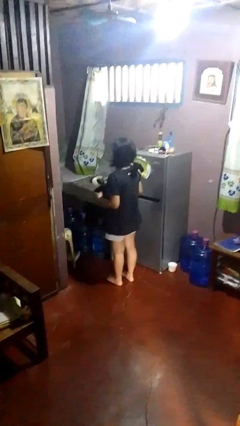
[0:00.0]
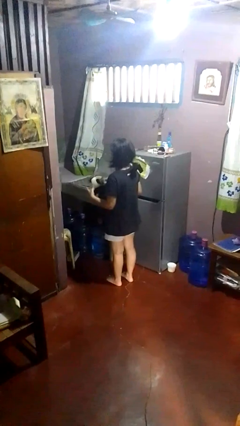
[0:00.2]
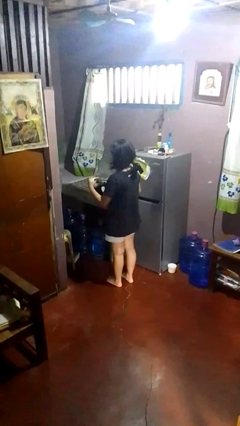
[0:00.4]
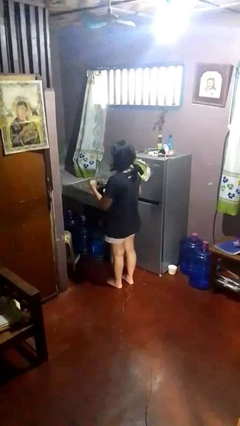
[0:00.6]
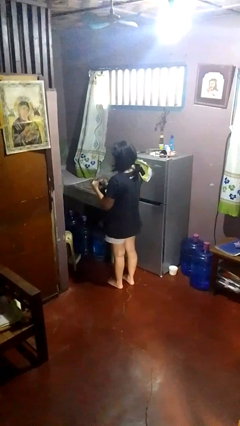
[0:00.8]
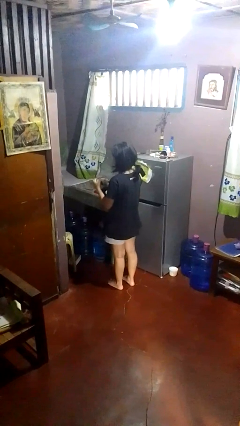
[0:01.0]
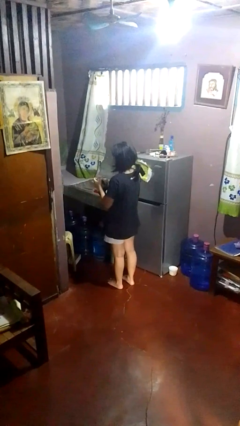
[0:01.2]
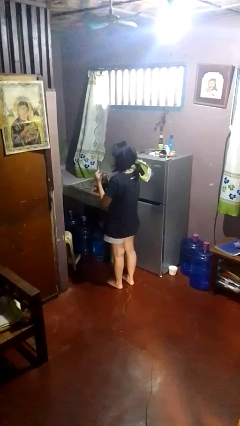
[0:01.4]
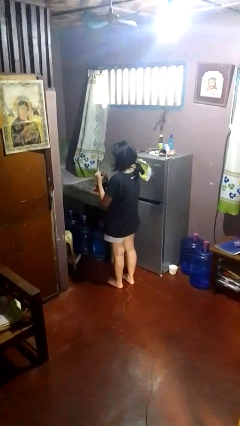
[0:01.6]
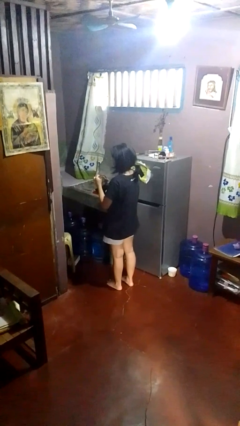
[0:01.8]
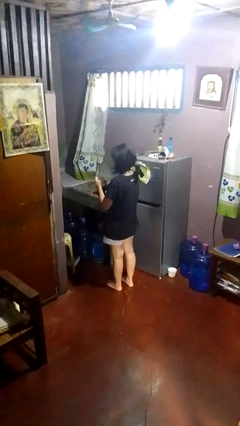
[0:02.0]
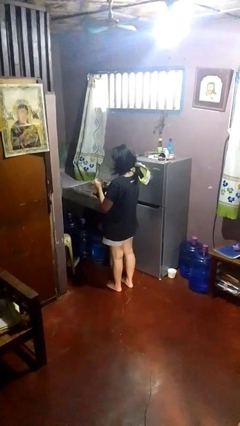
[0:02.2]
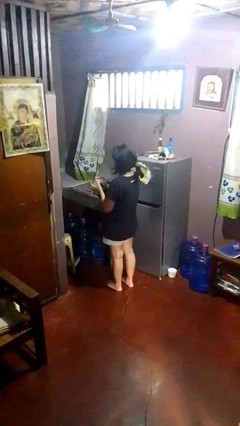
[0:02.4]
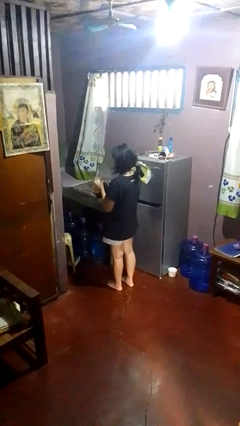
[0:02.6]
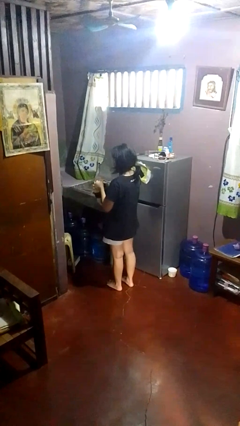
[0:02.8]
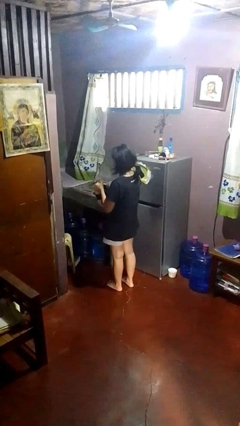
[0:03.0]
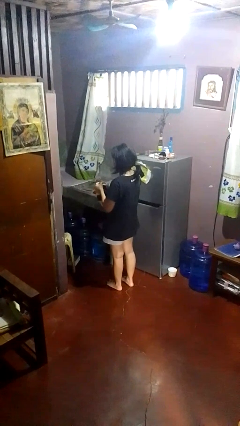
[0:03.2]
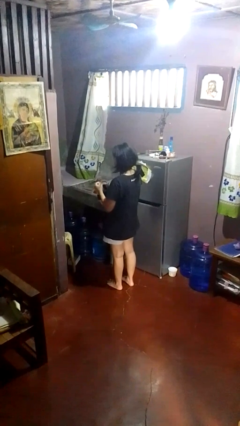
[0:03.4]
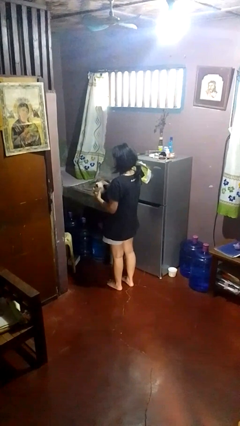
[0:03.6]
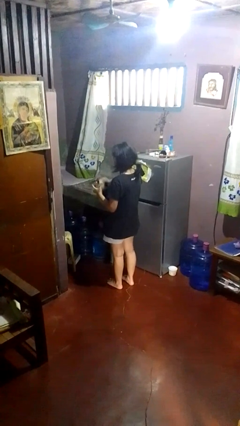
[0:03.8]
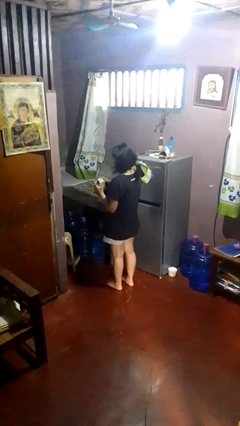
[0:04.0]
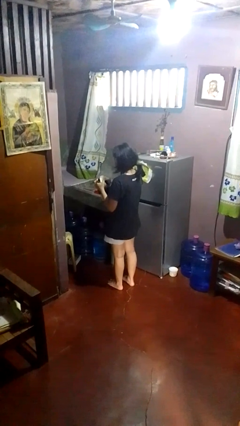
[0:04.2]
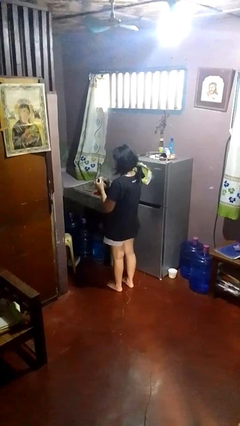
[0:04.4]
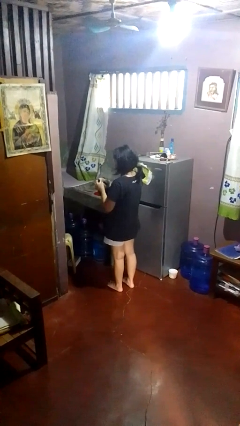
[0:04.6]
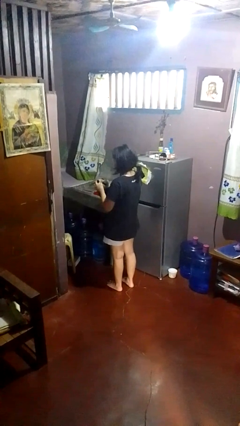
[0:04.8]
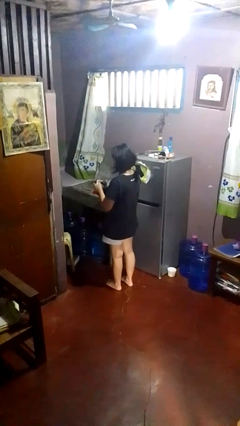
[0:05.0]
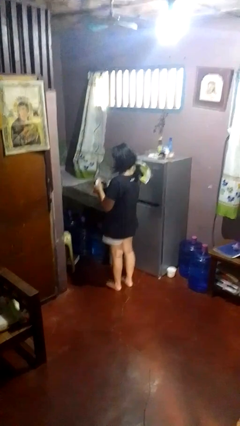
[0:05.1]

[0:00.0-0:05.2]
person squeezes object

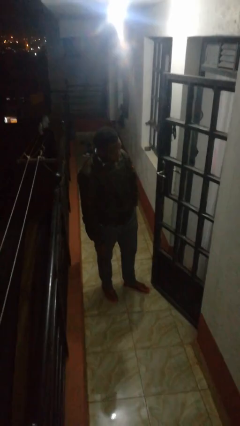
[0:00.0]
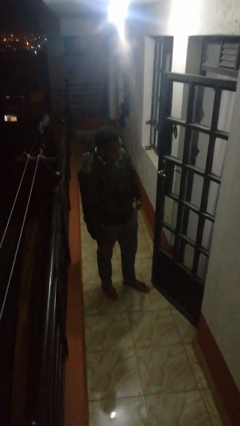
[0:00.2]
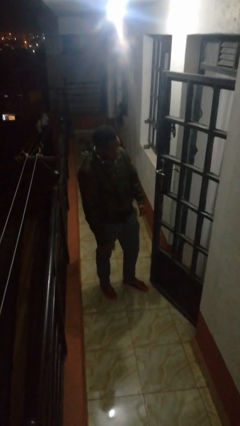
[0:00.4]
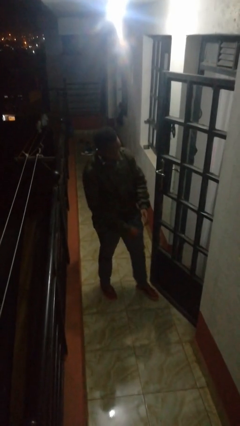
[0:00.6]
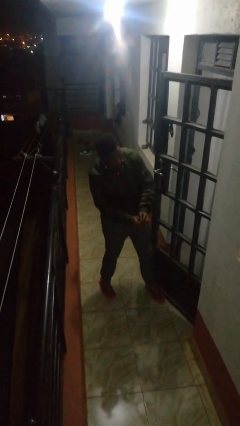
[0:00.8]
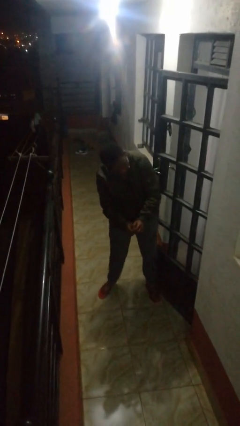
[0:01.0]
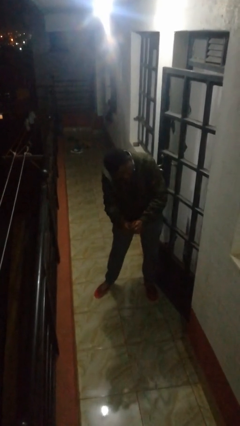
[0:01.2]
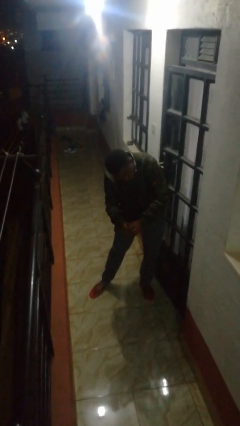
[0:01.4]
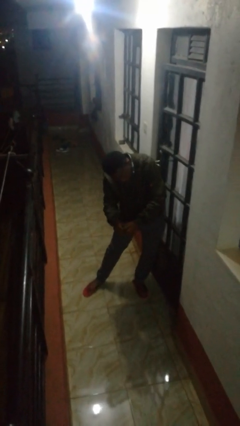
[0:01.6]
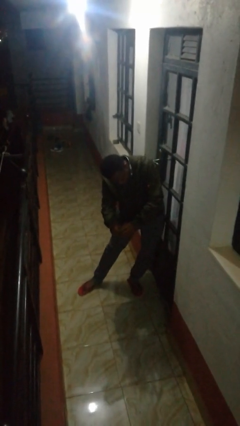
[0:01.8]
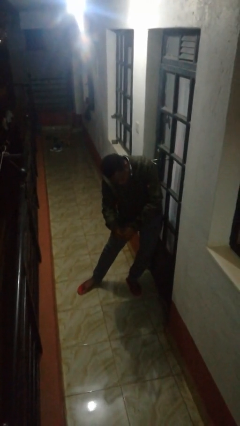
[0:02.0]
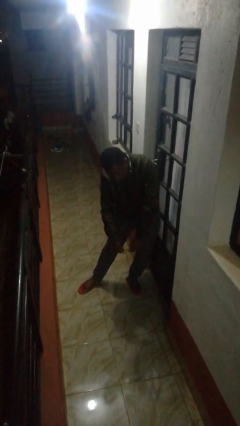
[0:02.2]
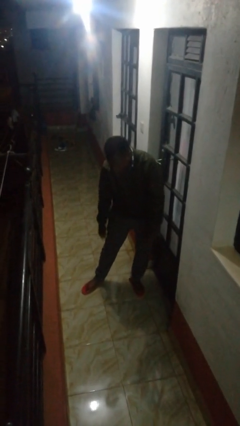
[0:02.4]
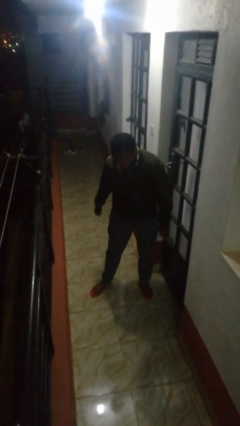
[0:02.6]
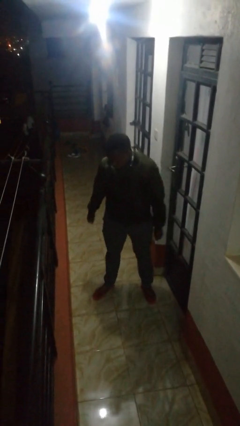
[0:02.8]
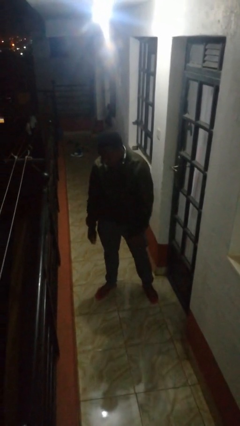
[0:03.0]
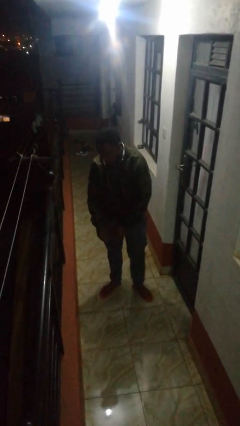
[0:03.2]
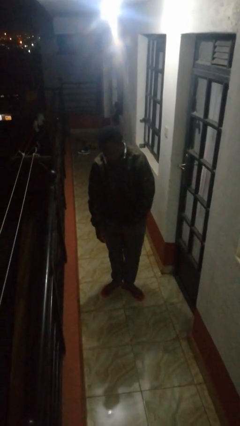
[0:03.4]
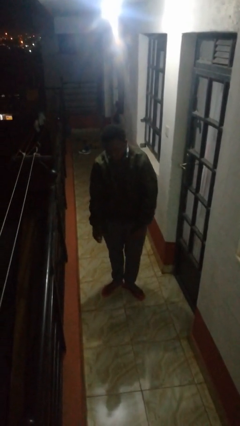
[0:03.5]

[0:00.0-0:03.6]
person closes door with hip

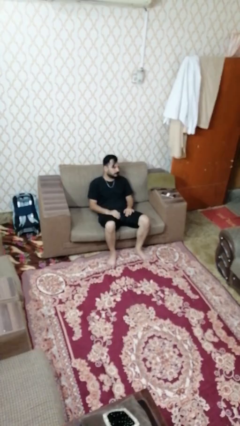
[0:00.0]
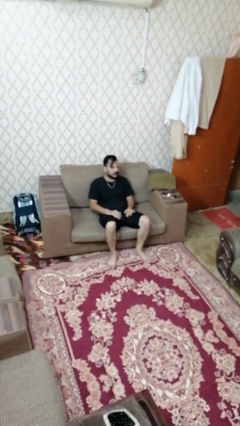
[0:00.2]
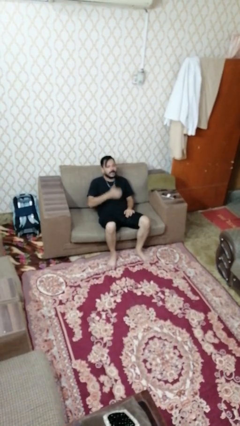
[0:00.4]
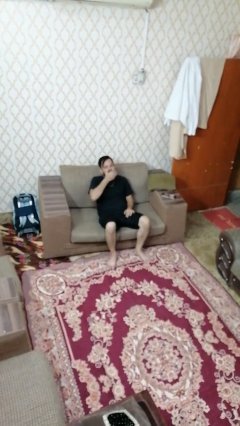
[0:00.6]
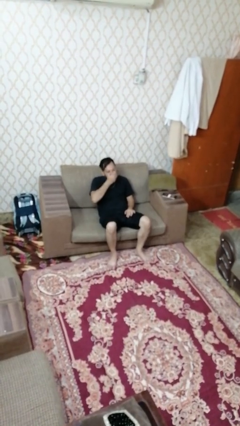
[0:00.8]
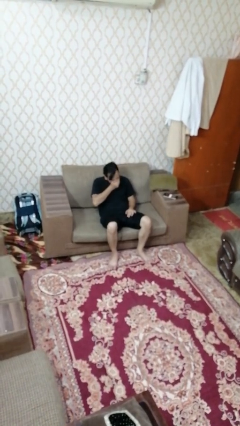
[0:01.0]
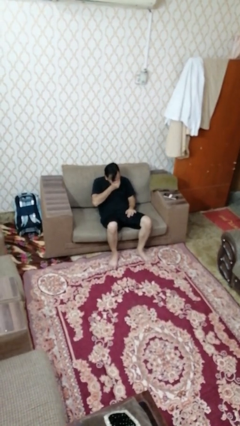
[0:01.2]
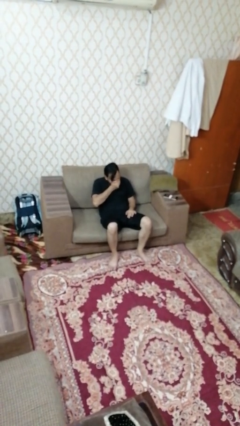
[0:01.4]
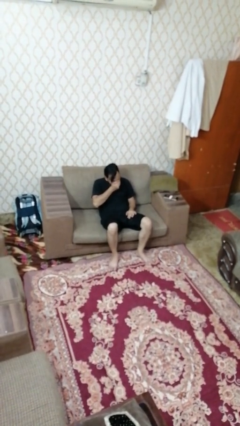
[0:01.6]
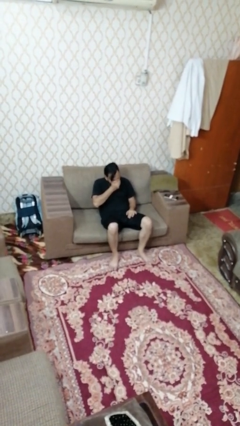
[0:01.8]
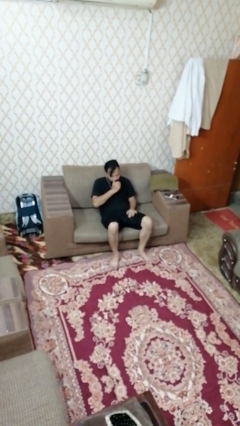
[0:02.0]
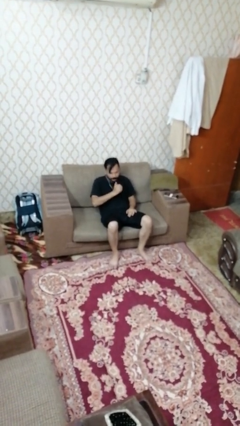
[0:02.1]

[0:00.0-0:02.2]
person sneezes into hand

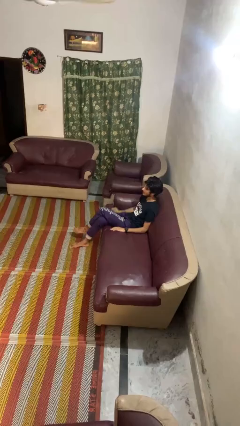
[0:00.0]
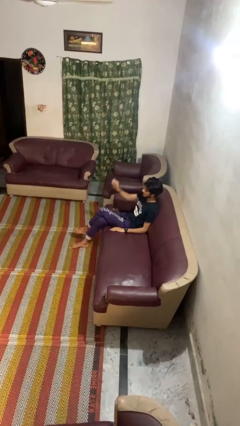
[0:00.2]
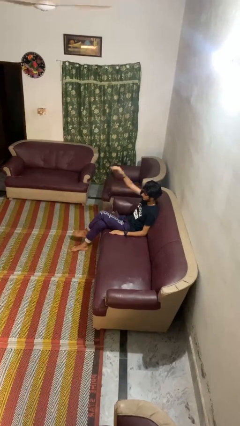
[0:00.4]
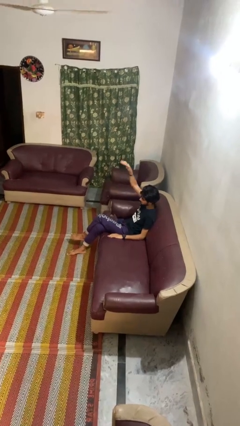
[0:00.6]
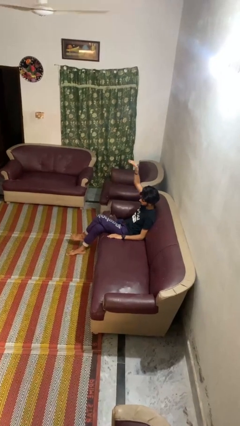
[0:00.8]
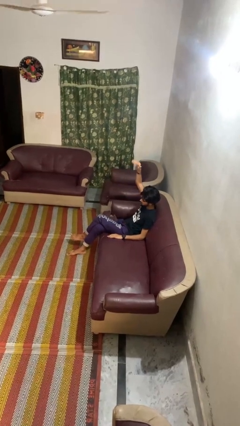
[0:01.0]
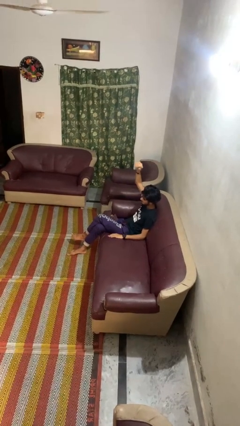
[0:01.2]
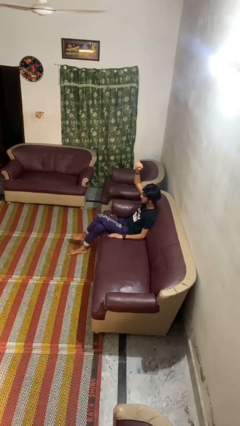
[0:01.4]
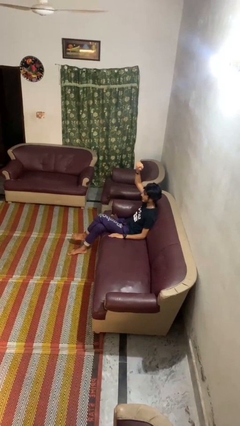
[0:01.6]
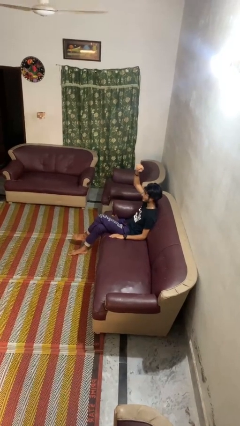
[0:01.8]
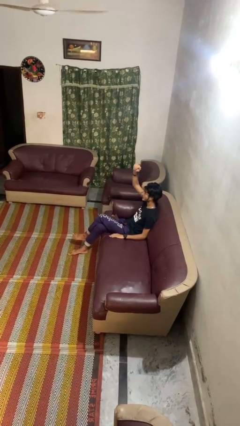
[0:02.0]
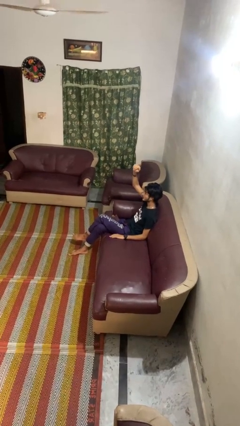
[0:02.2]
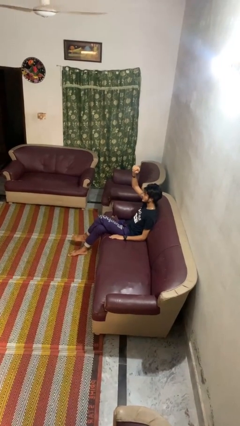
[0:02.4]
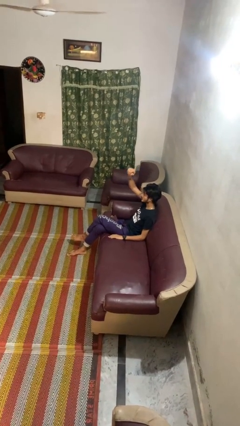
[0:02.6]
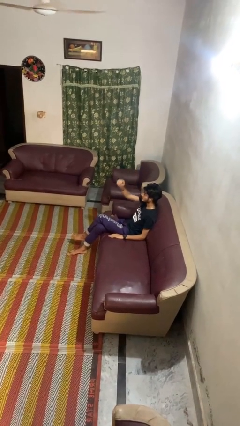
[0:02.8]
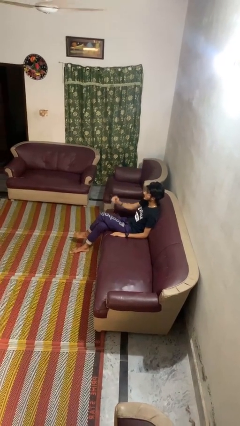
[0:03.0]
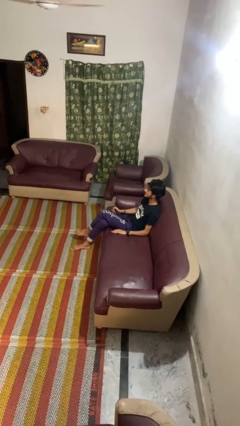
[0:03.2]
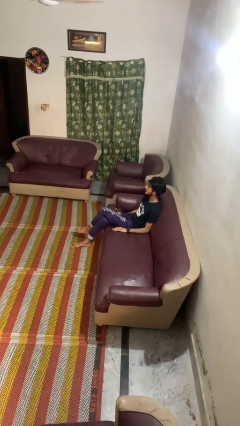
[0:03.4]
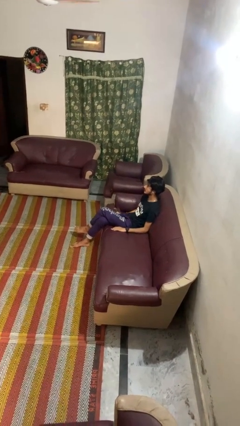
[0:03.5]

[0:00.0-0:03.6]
person gestures come here

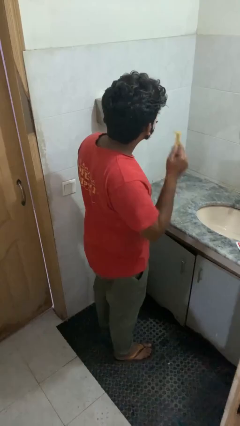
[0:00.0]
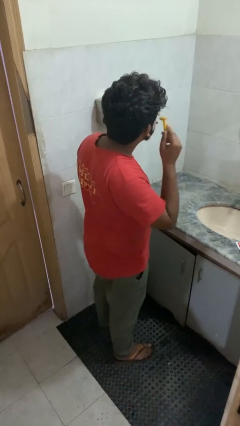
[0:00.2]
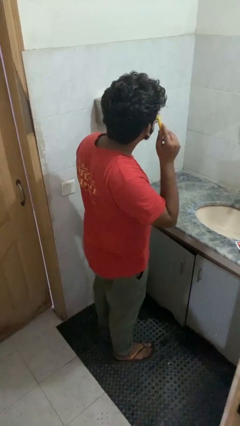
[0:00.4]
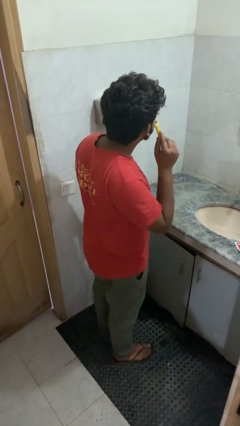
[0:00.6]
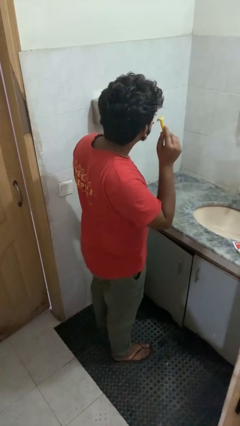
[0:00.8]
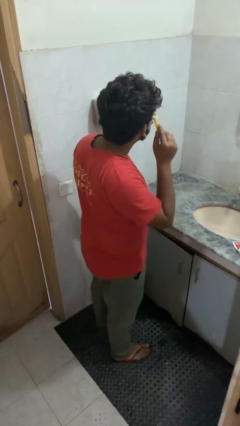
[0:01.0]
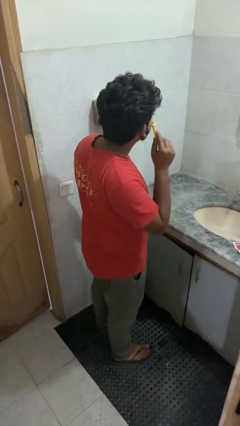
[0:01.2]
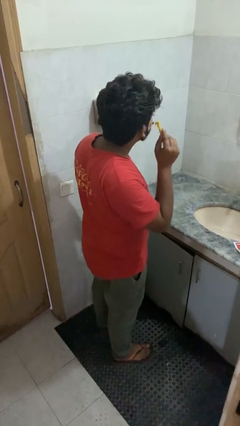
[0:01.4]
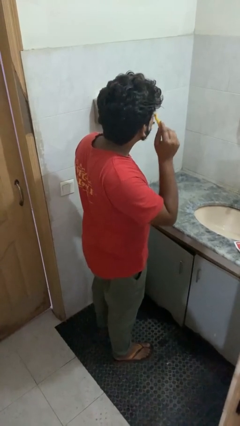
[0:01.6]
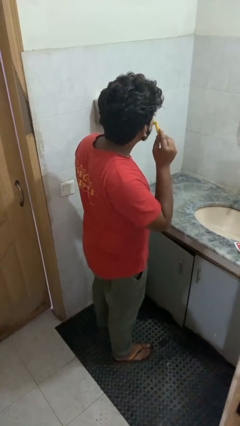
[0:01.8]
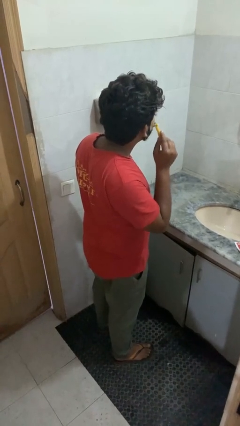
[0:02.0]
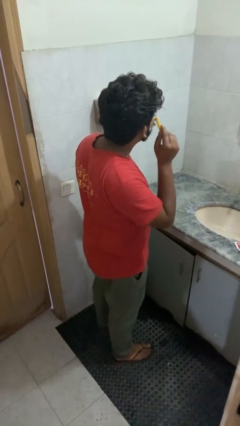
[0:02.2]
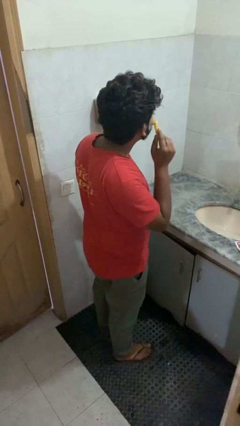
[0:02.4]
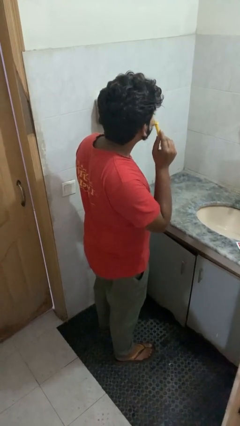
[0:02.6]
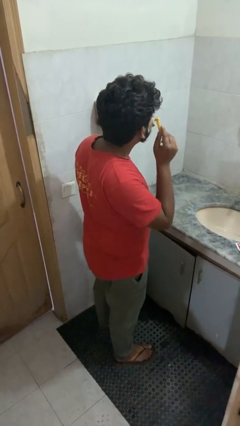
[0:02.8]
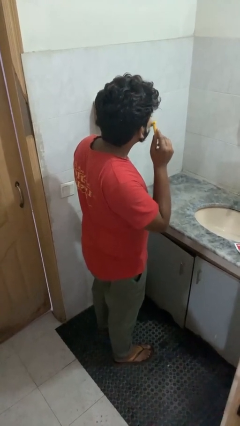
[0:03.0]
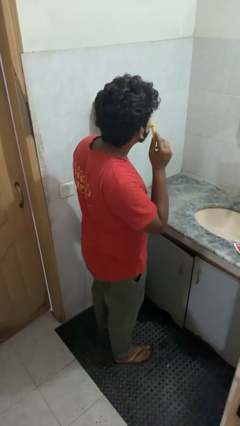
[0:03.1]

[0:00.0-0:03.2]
person shaves face
